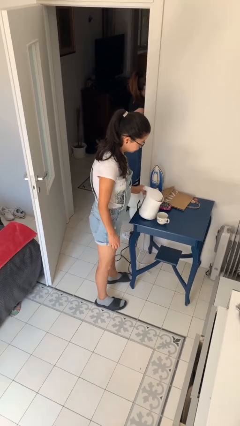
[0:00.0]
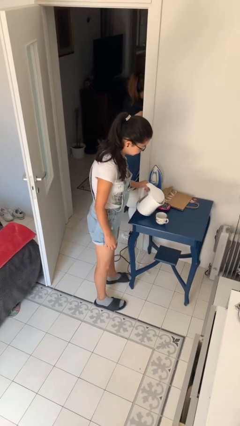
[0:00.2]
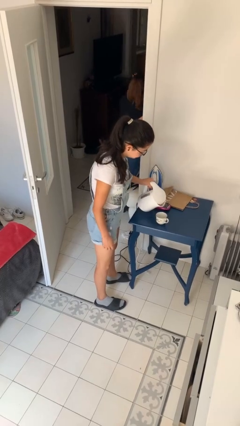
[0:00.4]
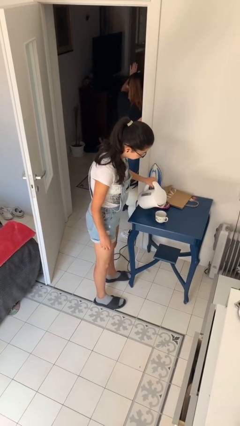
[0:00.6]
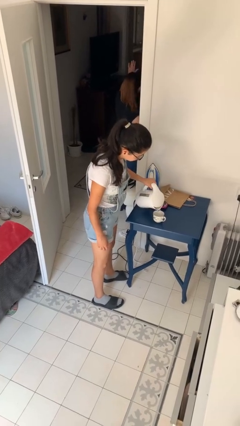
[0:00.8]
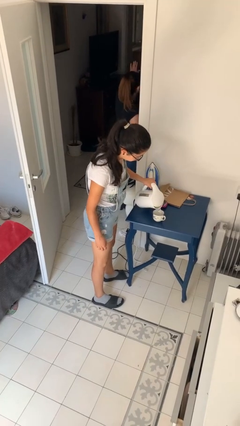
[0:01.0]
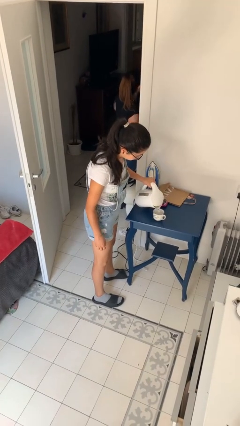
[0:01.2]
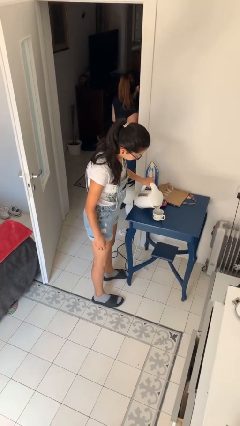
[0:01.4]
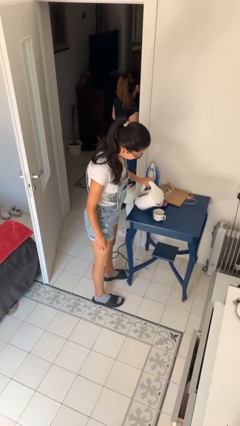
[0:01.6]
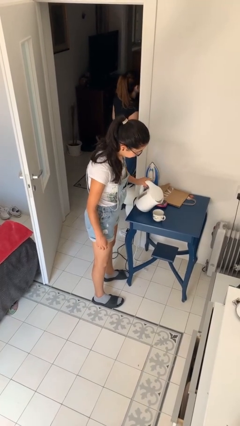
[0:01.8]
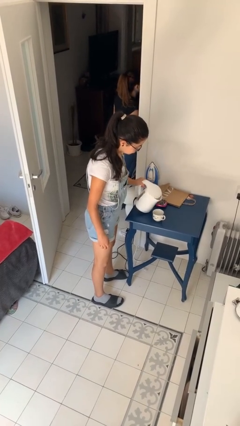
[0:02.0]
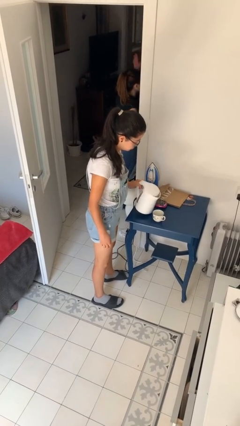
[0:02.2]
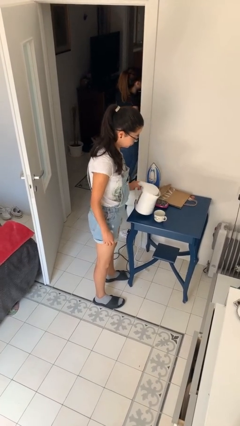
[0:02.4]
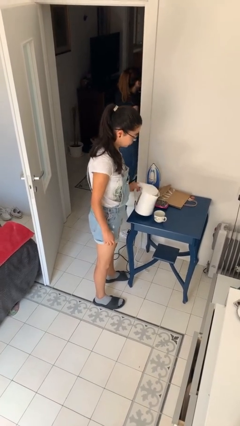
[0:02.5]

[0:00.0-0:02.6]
person pours coffee into mug

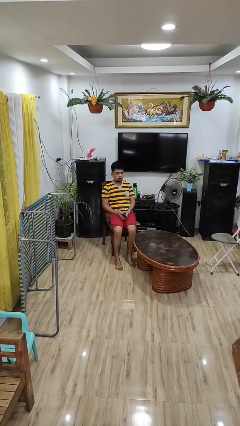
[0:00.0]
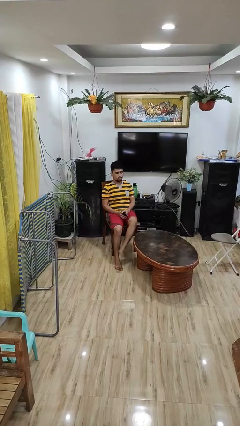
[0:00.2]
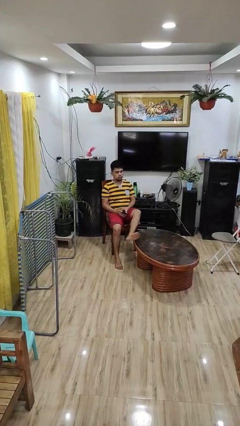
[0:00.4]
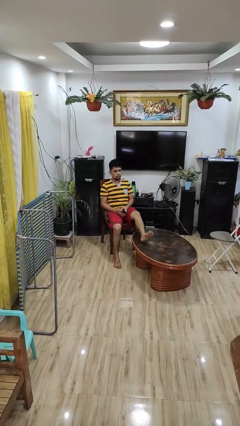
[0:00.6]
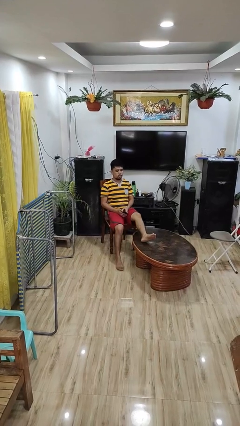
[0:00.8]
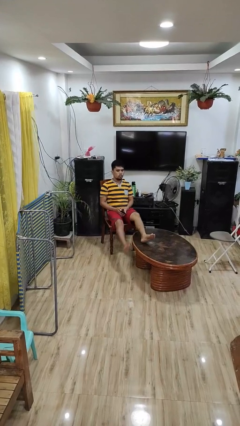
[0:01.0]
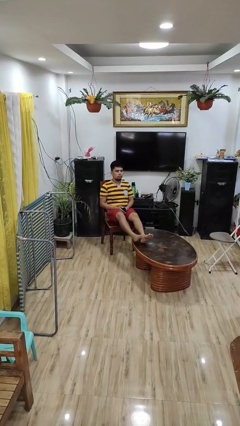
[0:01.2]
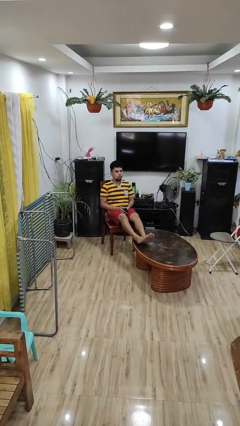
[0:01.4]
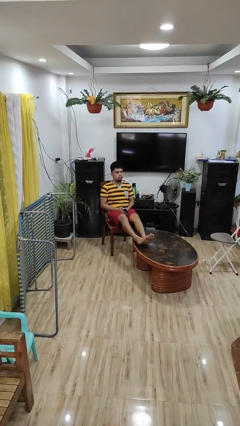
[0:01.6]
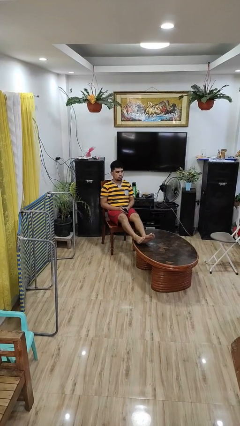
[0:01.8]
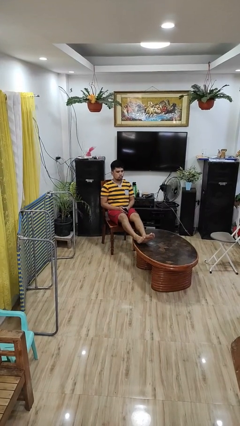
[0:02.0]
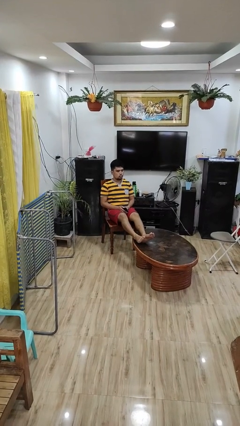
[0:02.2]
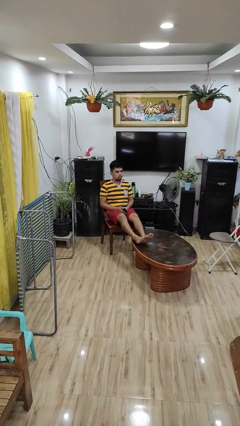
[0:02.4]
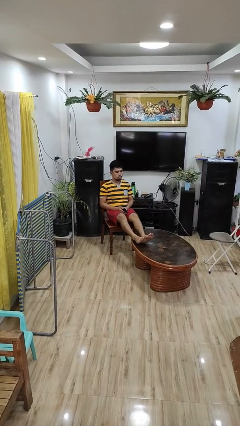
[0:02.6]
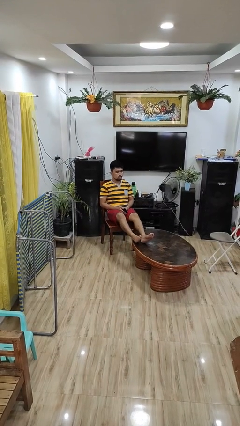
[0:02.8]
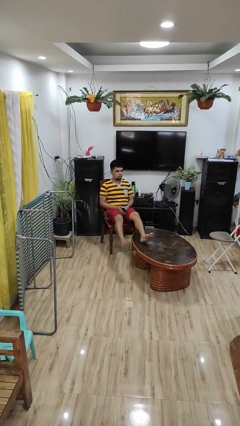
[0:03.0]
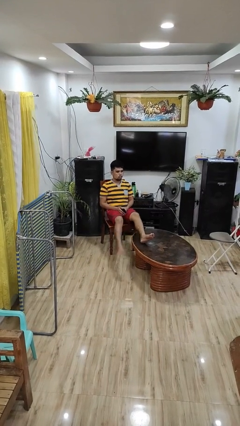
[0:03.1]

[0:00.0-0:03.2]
person puts feet up

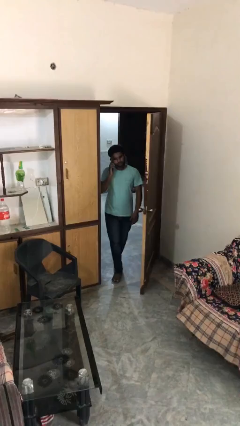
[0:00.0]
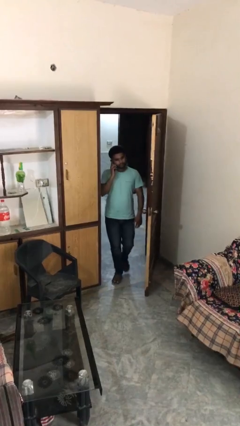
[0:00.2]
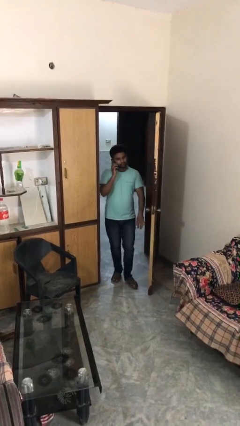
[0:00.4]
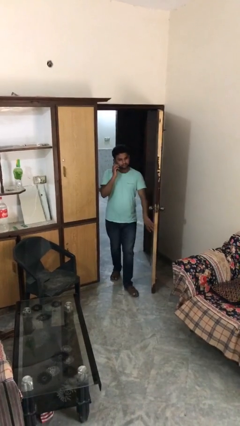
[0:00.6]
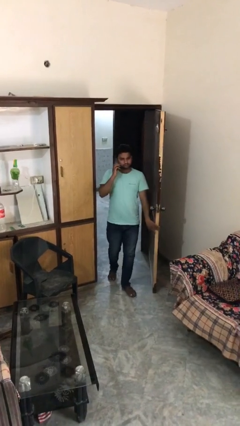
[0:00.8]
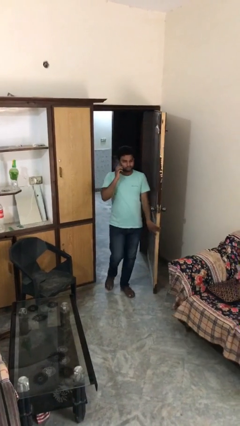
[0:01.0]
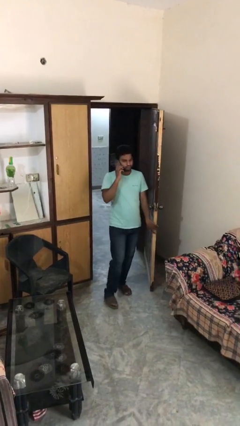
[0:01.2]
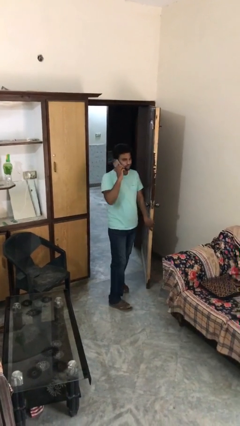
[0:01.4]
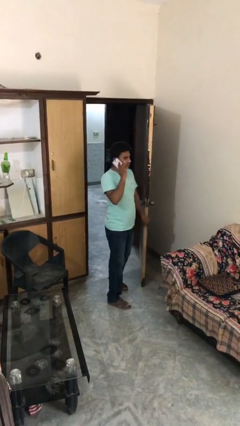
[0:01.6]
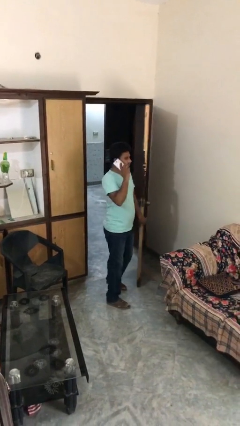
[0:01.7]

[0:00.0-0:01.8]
person enters scene through structure

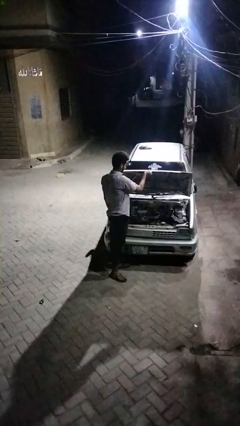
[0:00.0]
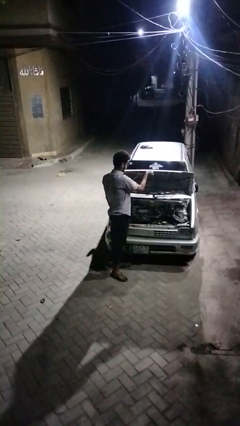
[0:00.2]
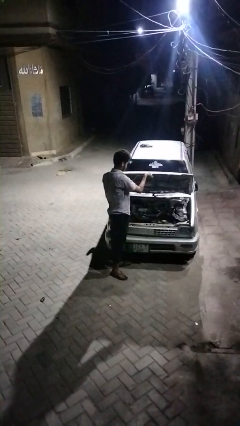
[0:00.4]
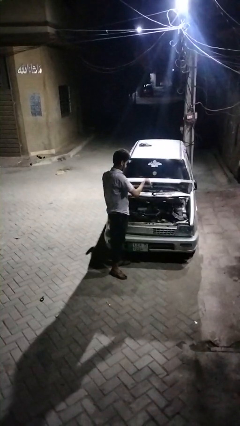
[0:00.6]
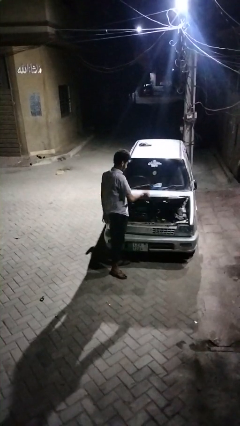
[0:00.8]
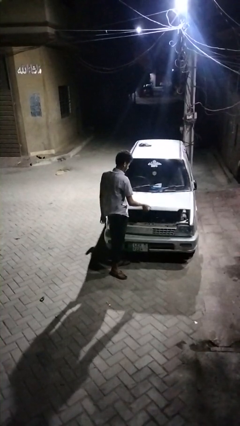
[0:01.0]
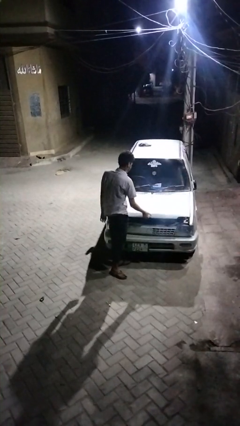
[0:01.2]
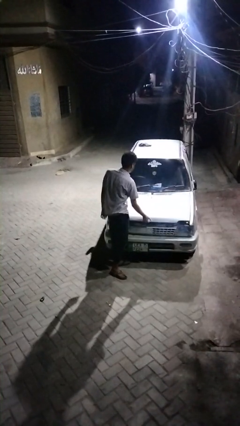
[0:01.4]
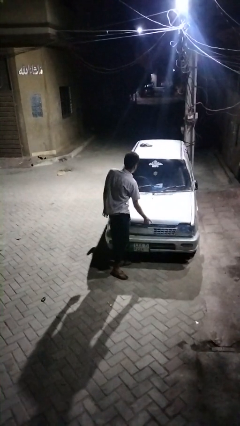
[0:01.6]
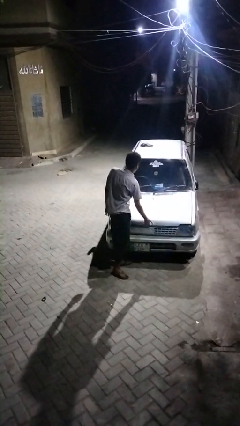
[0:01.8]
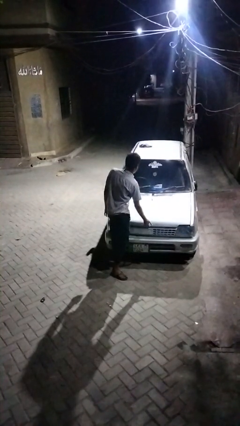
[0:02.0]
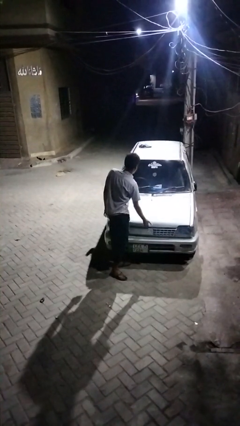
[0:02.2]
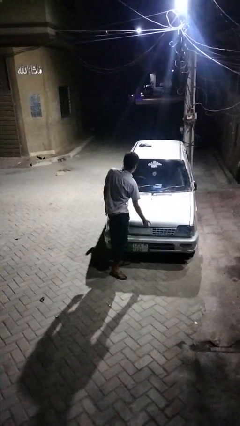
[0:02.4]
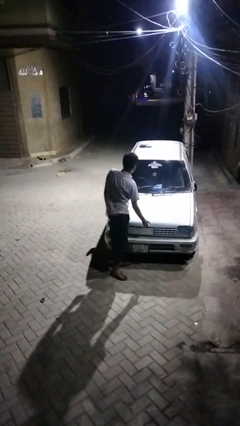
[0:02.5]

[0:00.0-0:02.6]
person closes car hood

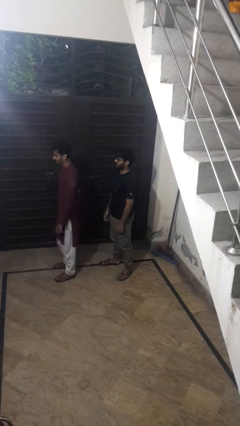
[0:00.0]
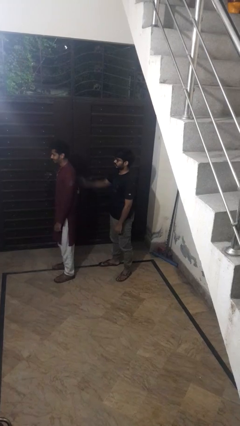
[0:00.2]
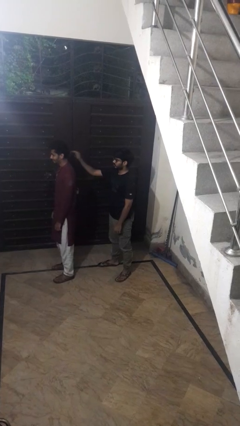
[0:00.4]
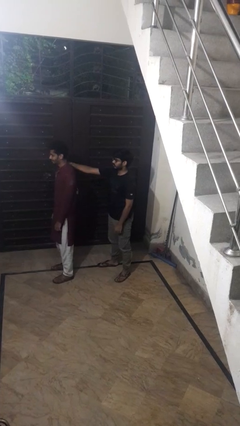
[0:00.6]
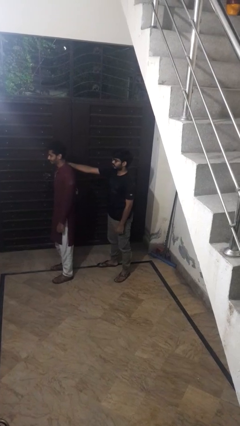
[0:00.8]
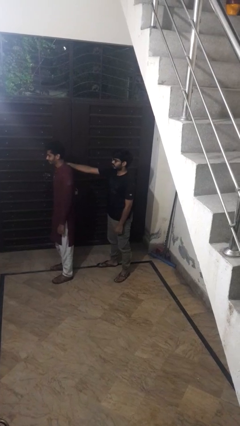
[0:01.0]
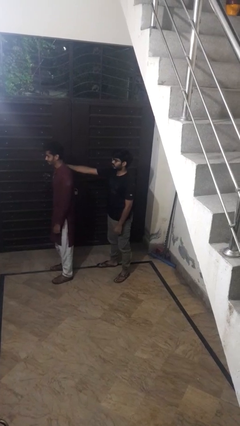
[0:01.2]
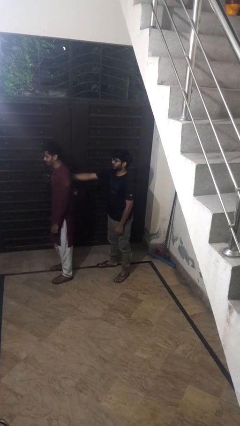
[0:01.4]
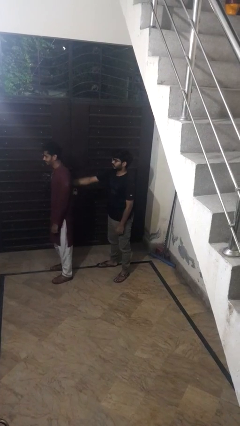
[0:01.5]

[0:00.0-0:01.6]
person grabs person by shoulder

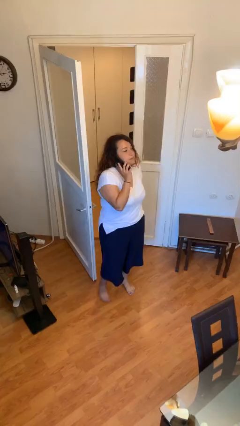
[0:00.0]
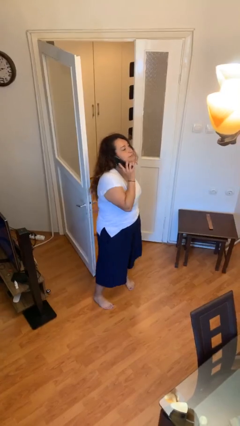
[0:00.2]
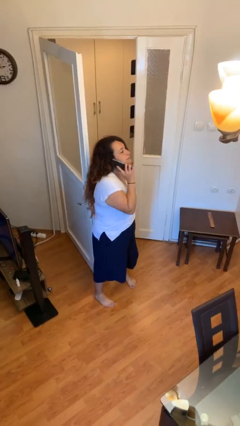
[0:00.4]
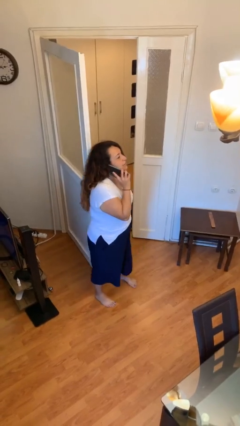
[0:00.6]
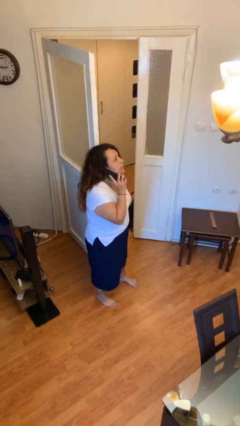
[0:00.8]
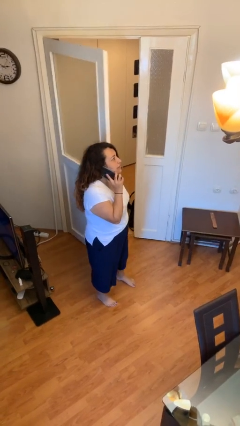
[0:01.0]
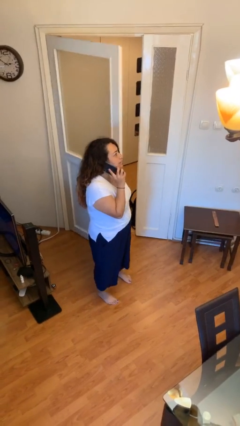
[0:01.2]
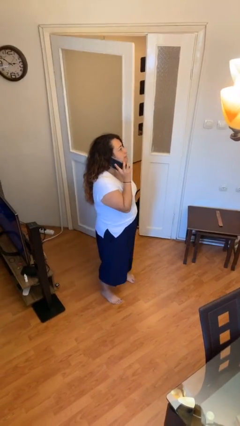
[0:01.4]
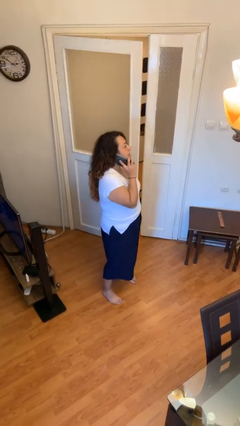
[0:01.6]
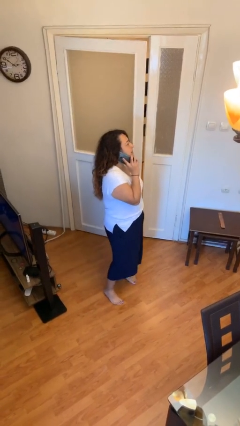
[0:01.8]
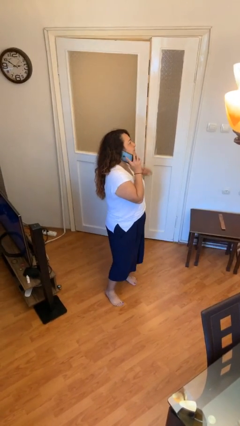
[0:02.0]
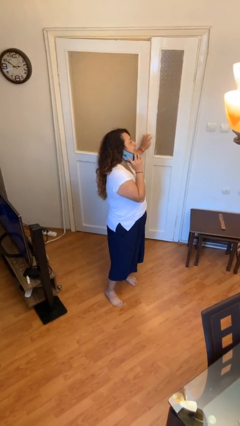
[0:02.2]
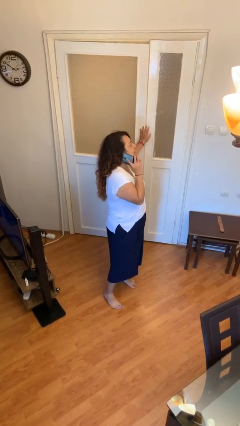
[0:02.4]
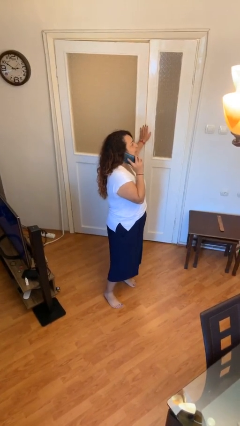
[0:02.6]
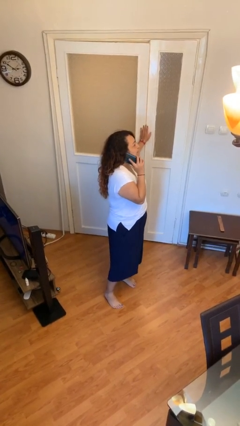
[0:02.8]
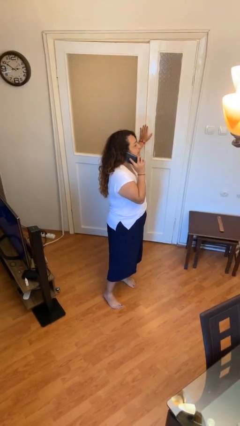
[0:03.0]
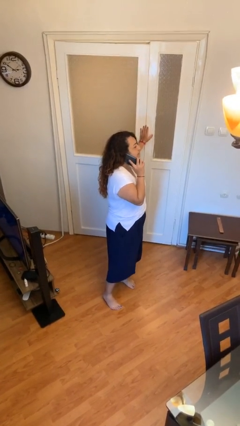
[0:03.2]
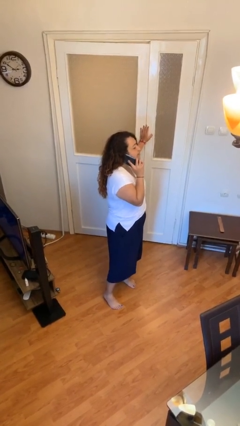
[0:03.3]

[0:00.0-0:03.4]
person closes facility door

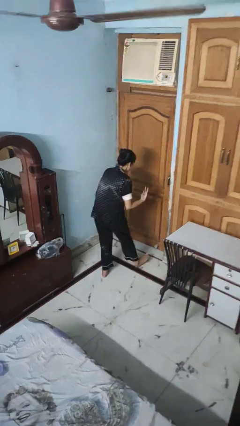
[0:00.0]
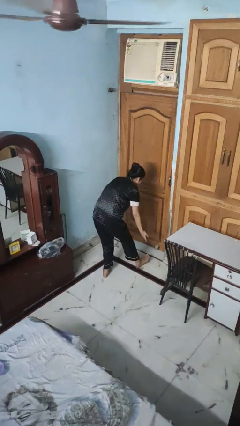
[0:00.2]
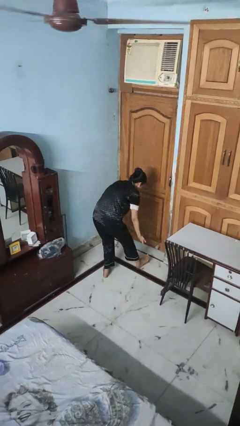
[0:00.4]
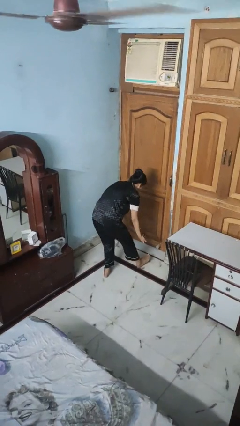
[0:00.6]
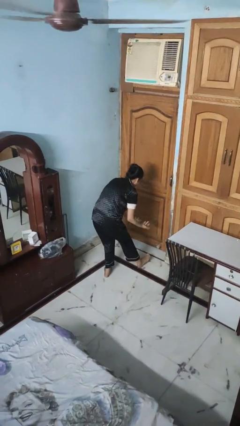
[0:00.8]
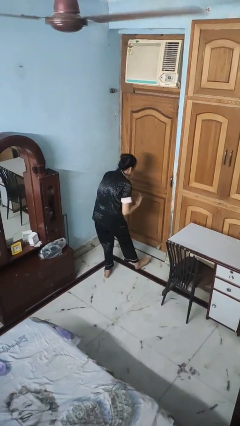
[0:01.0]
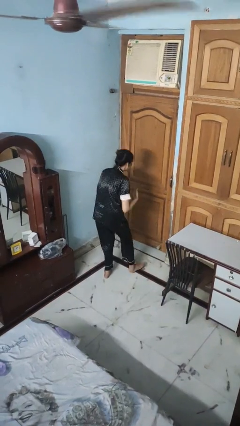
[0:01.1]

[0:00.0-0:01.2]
person dances in place

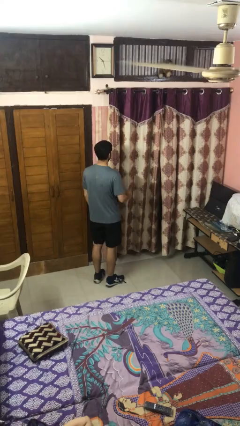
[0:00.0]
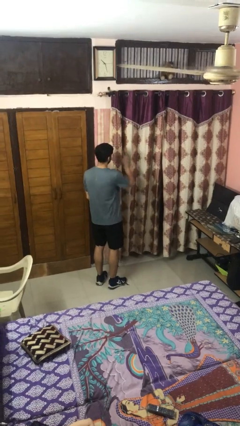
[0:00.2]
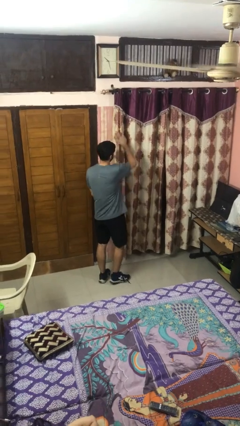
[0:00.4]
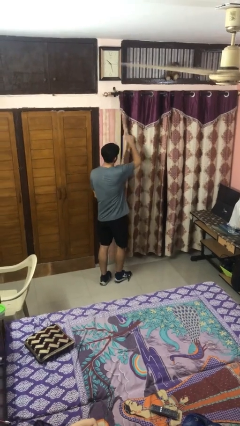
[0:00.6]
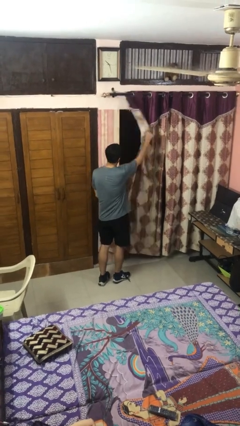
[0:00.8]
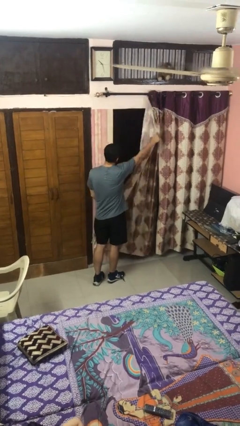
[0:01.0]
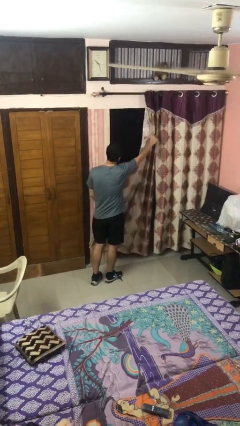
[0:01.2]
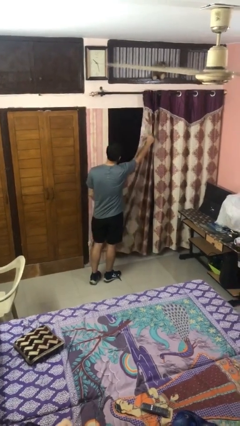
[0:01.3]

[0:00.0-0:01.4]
person opens curtains
